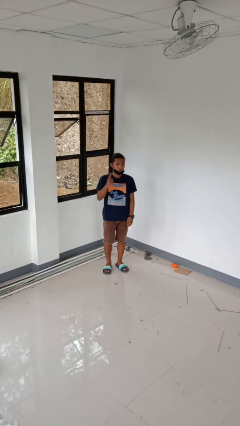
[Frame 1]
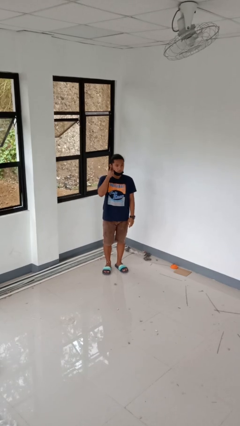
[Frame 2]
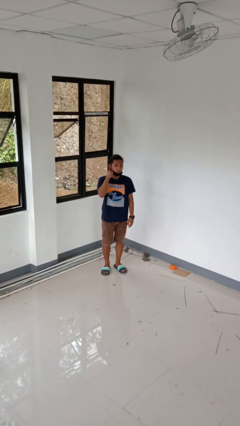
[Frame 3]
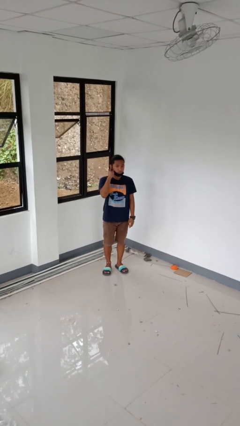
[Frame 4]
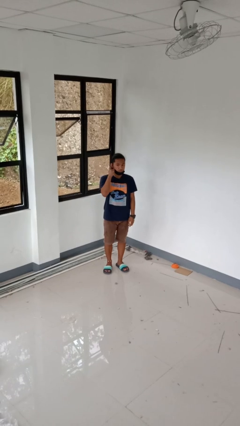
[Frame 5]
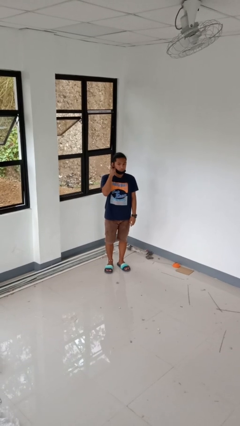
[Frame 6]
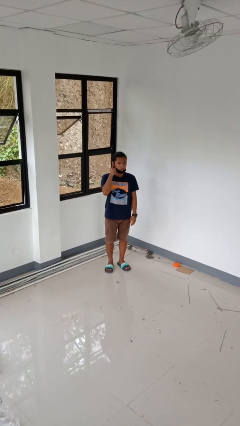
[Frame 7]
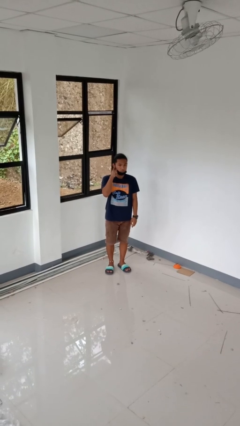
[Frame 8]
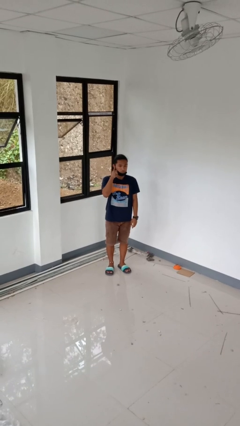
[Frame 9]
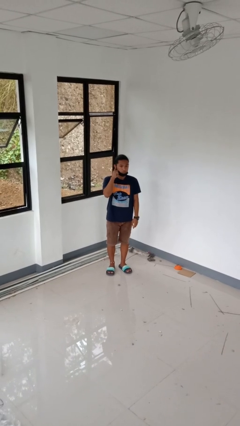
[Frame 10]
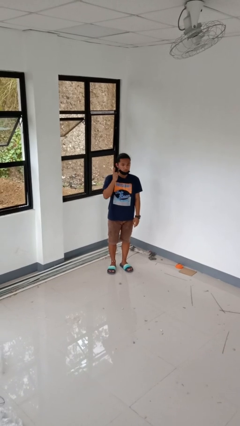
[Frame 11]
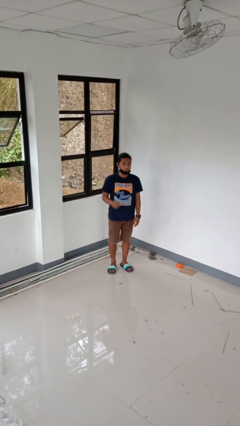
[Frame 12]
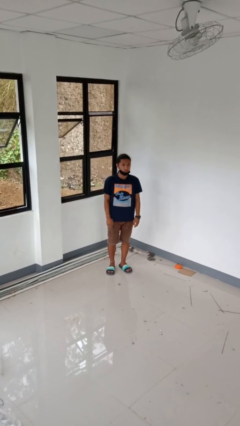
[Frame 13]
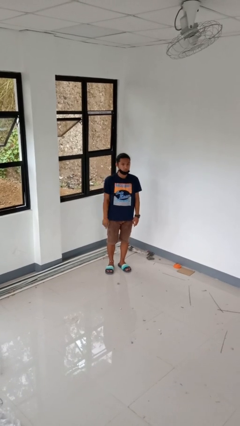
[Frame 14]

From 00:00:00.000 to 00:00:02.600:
person gestures listen closely

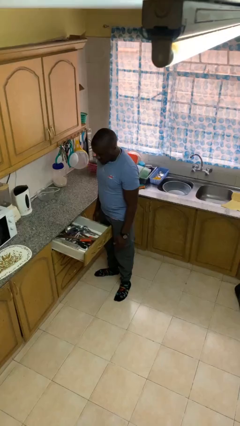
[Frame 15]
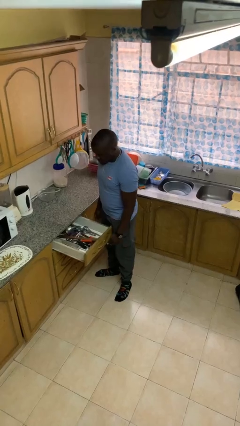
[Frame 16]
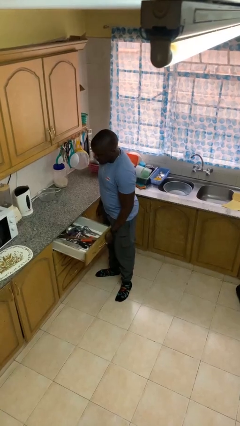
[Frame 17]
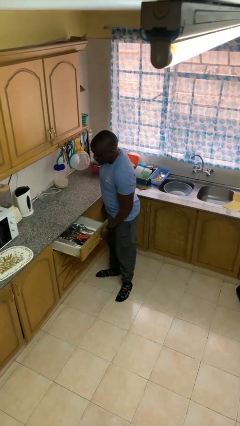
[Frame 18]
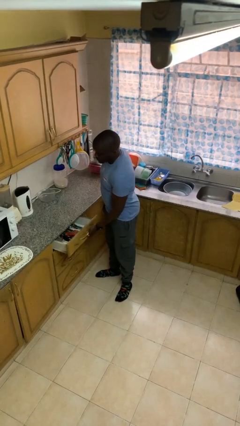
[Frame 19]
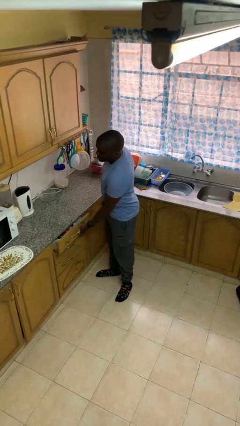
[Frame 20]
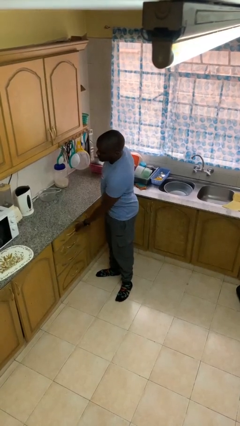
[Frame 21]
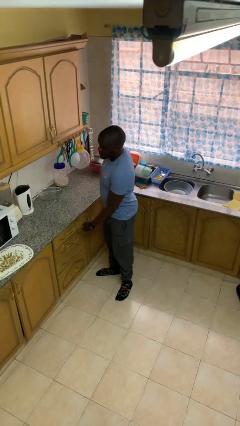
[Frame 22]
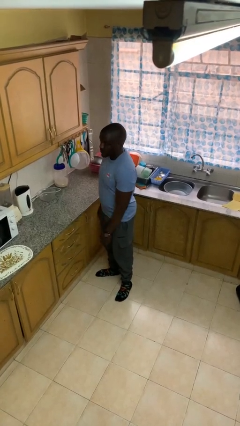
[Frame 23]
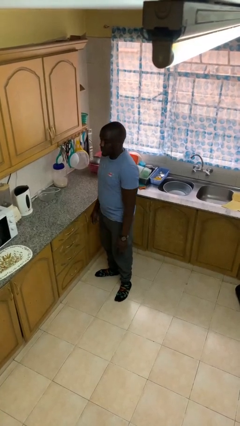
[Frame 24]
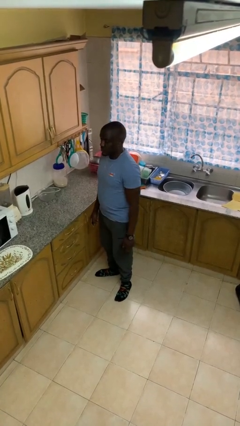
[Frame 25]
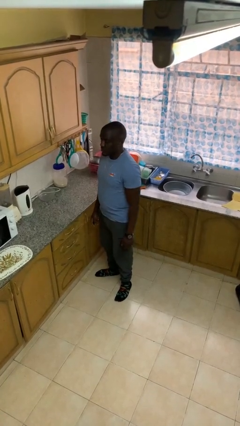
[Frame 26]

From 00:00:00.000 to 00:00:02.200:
person closes kitchen drawer

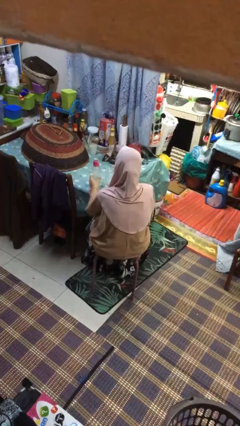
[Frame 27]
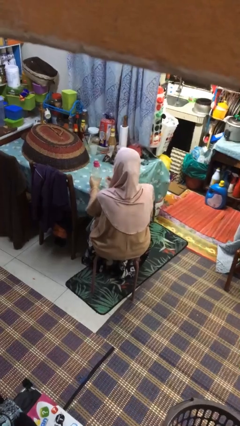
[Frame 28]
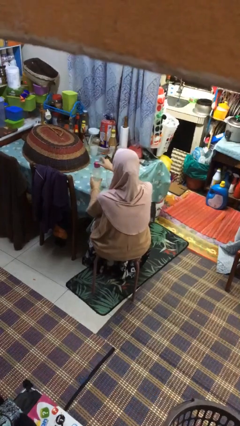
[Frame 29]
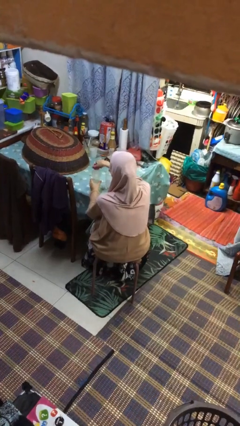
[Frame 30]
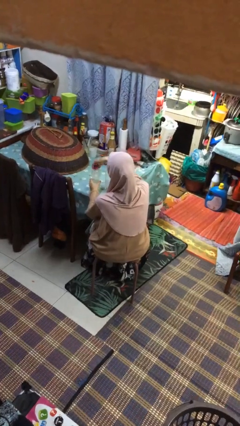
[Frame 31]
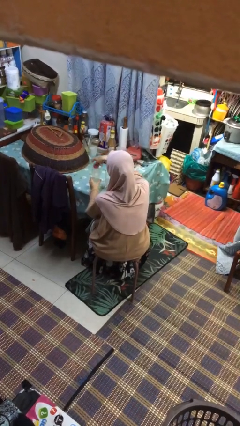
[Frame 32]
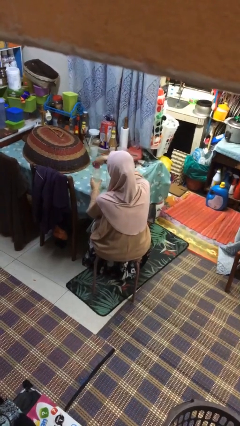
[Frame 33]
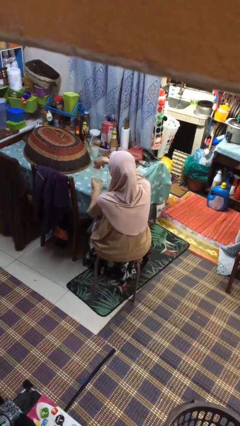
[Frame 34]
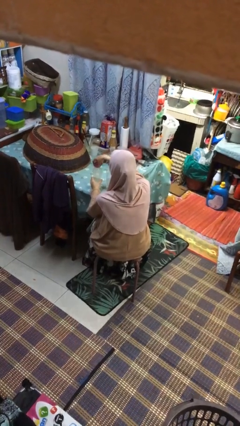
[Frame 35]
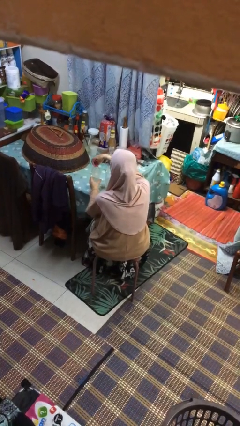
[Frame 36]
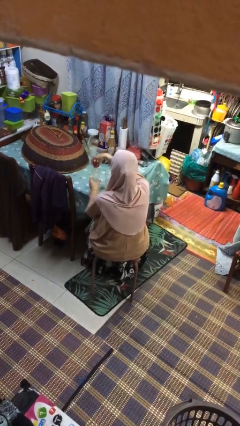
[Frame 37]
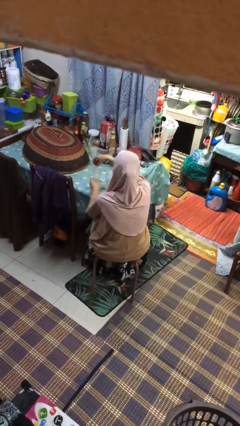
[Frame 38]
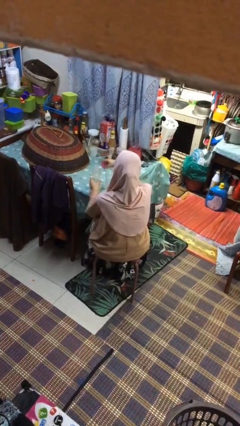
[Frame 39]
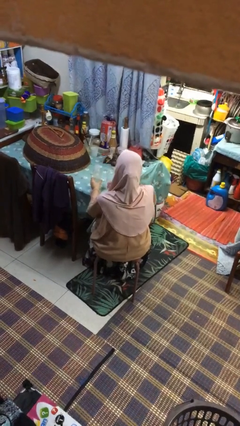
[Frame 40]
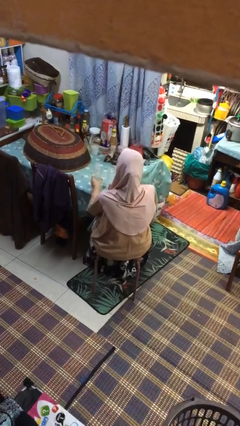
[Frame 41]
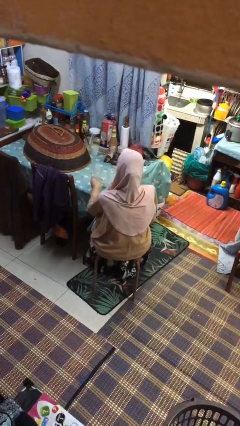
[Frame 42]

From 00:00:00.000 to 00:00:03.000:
person unscrews lid from bottle

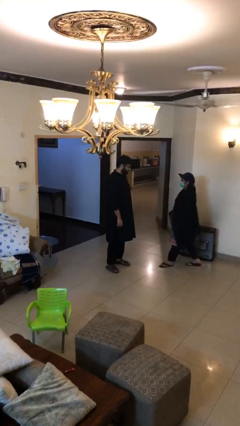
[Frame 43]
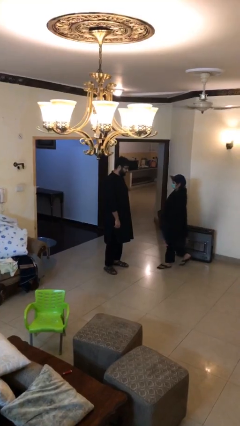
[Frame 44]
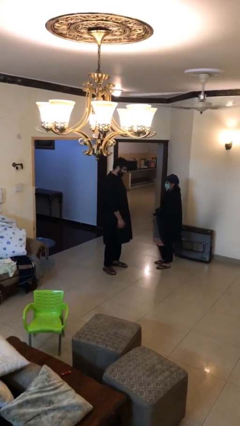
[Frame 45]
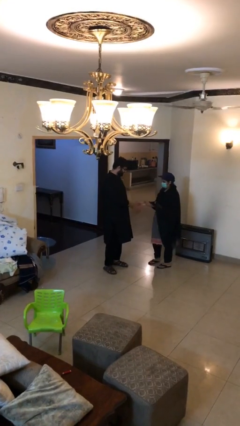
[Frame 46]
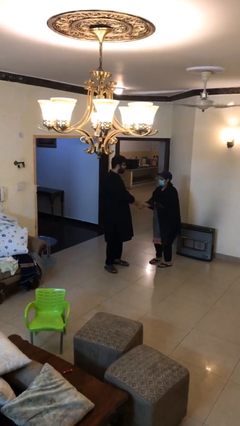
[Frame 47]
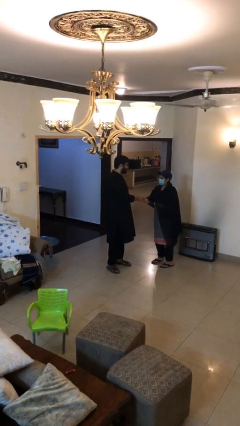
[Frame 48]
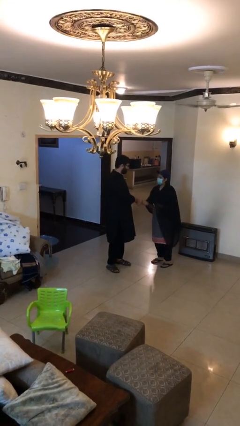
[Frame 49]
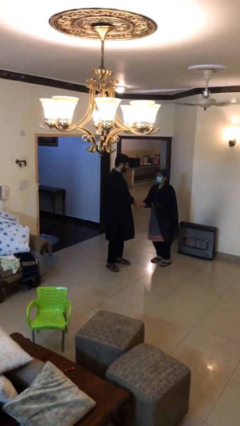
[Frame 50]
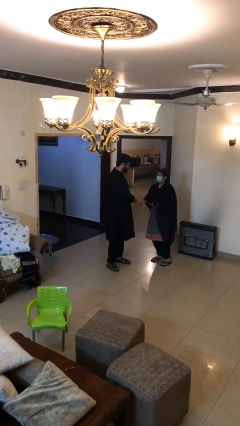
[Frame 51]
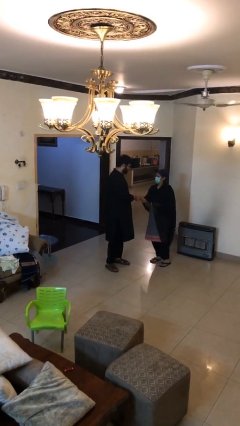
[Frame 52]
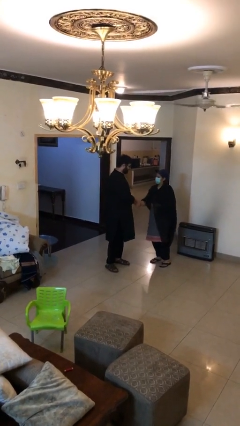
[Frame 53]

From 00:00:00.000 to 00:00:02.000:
person shakes hand

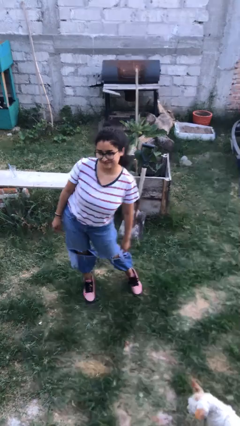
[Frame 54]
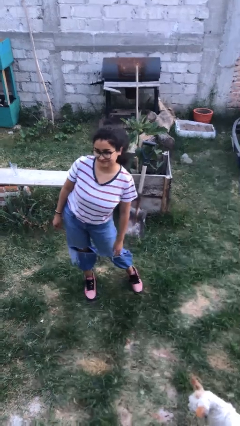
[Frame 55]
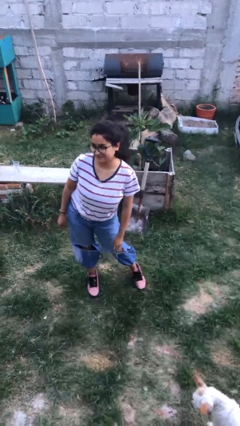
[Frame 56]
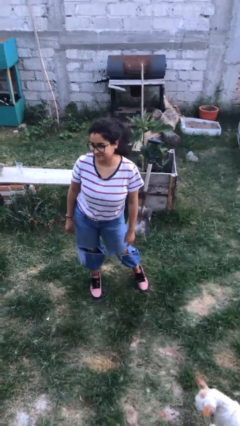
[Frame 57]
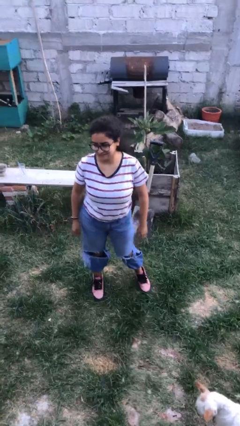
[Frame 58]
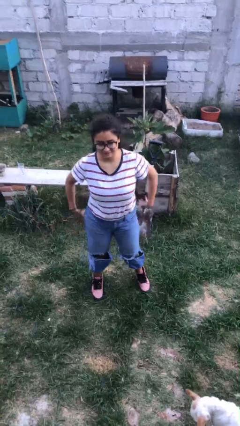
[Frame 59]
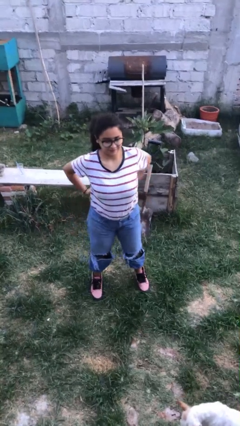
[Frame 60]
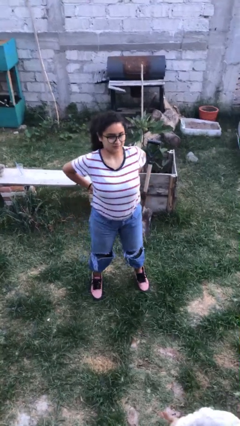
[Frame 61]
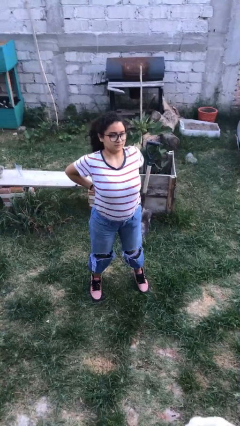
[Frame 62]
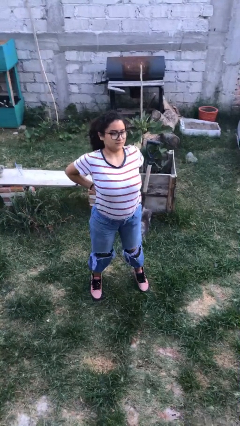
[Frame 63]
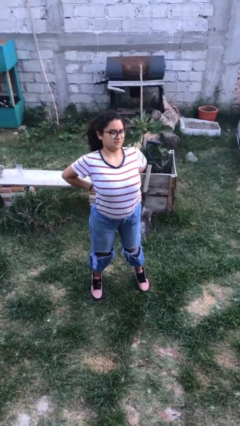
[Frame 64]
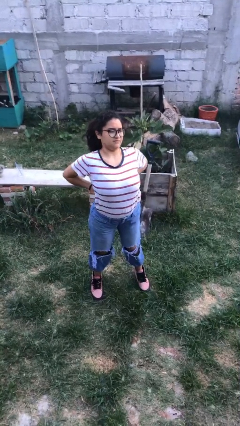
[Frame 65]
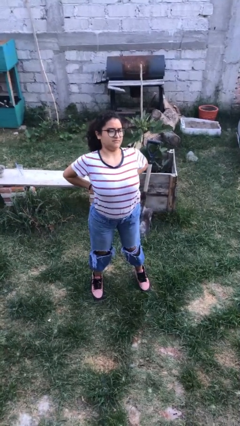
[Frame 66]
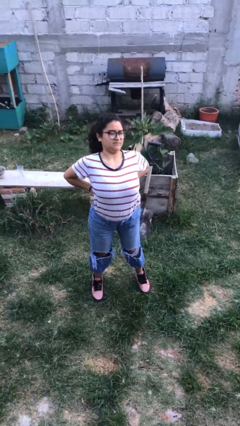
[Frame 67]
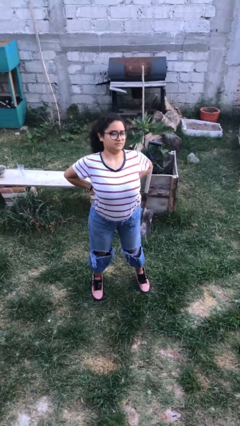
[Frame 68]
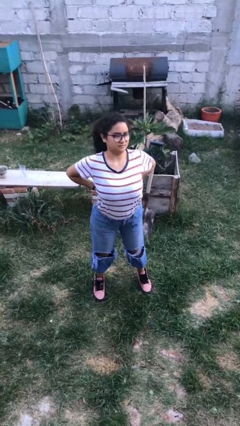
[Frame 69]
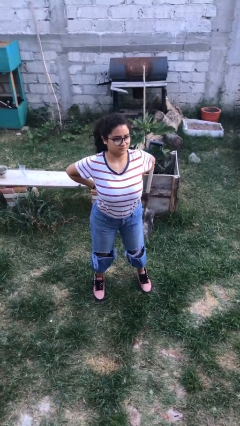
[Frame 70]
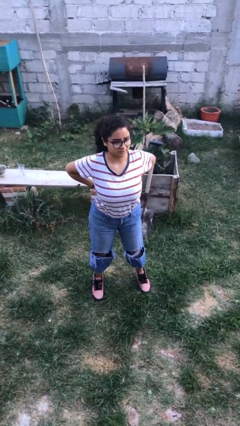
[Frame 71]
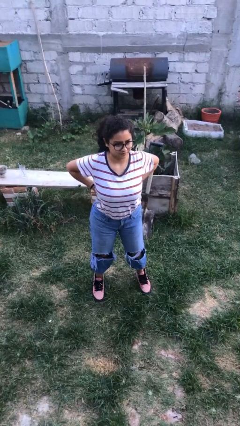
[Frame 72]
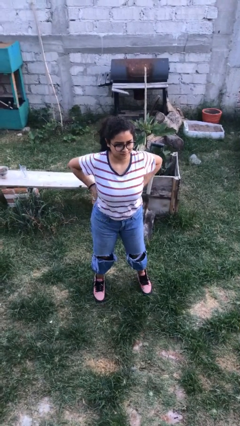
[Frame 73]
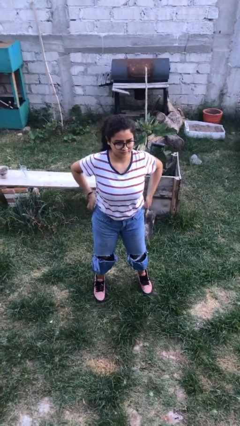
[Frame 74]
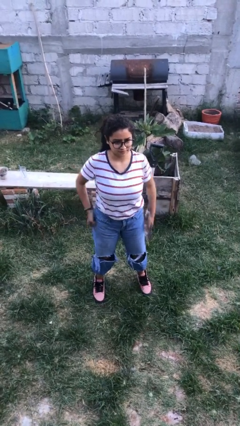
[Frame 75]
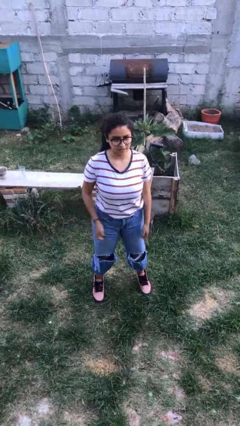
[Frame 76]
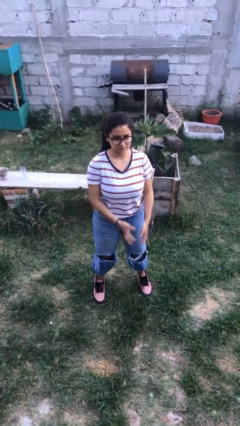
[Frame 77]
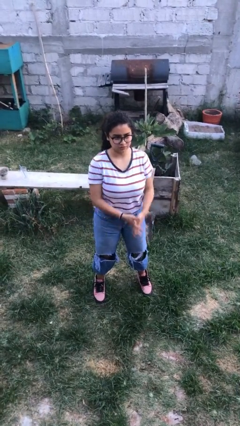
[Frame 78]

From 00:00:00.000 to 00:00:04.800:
person stretches back

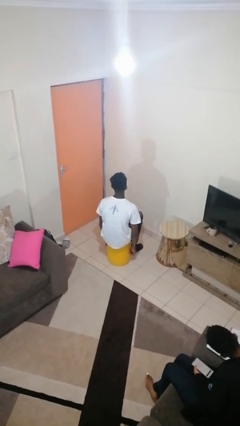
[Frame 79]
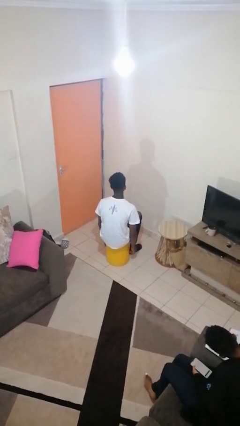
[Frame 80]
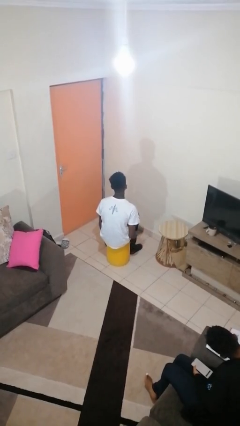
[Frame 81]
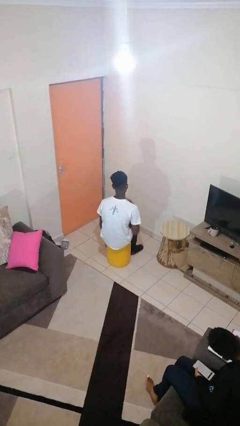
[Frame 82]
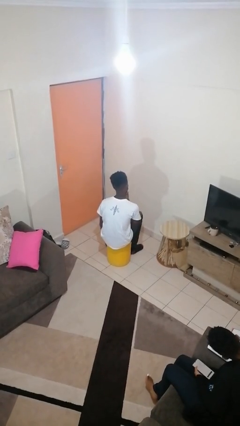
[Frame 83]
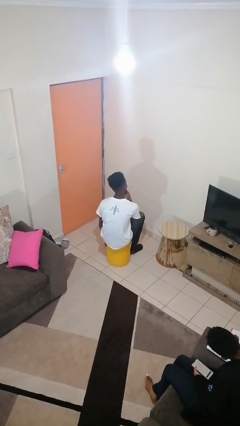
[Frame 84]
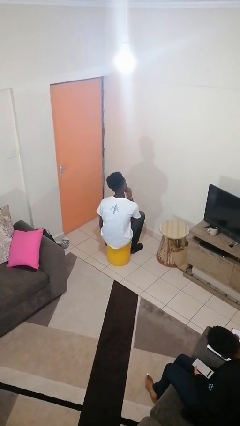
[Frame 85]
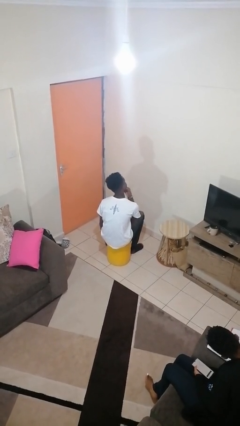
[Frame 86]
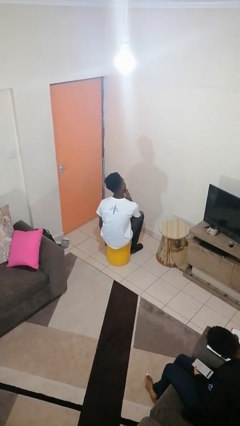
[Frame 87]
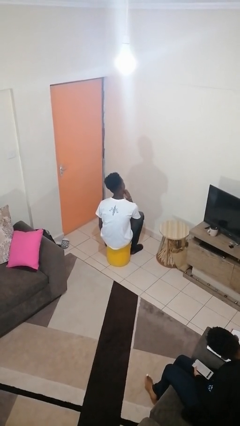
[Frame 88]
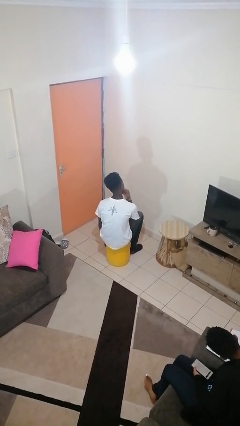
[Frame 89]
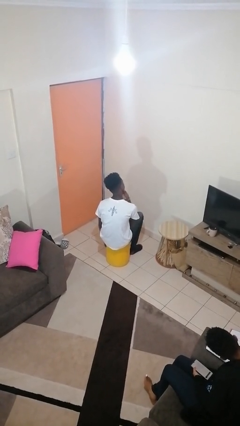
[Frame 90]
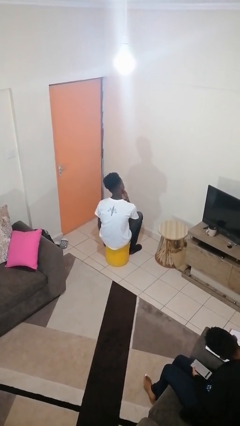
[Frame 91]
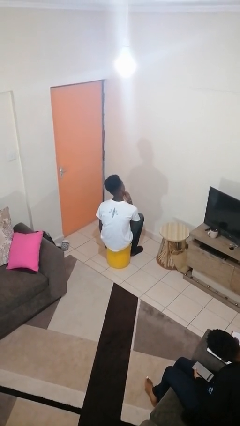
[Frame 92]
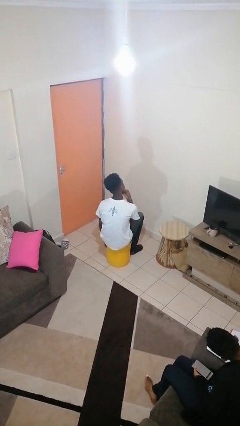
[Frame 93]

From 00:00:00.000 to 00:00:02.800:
person strokes chin
